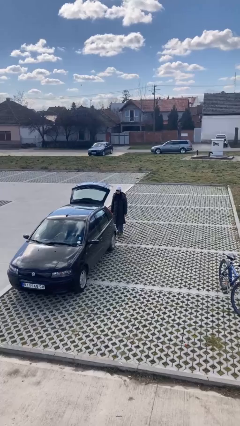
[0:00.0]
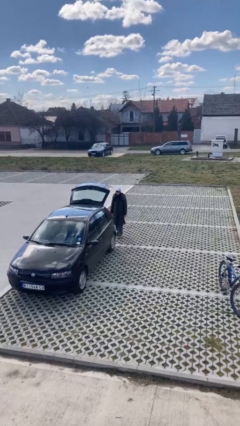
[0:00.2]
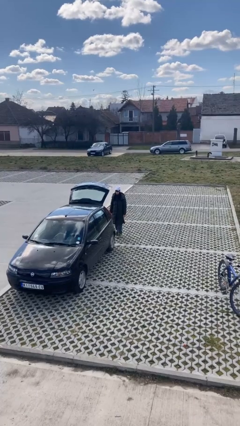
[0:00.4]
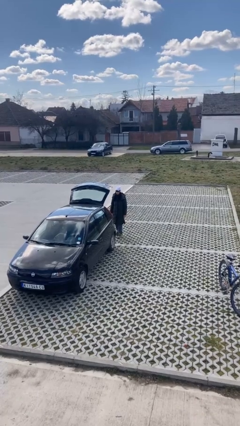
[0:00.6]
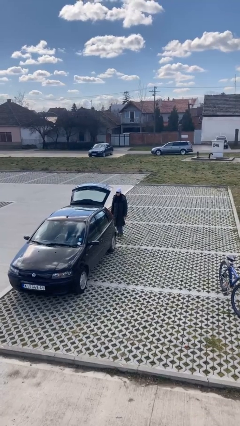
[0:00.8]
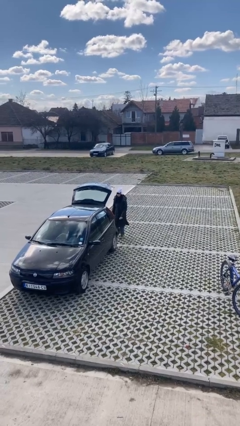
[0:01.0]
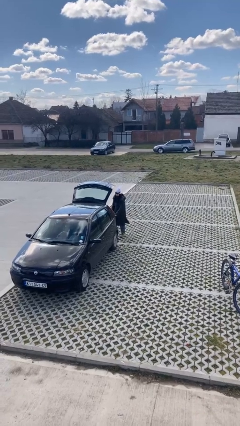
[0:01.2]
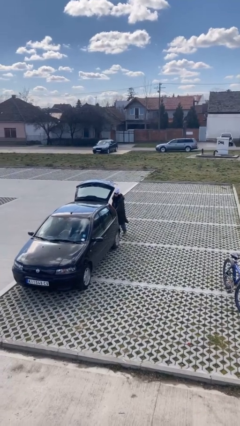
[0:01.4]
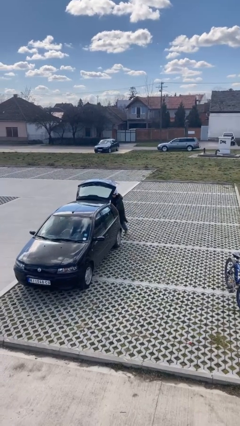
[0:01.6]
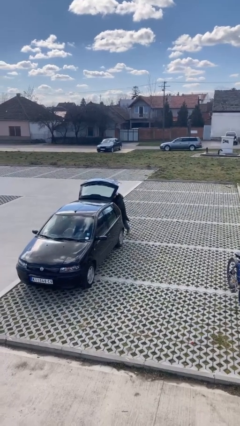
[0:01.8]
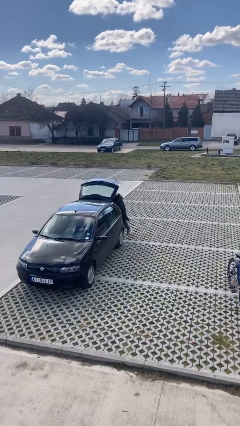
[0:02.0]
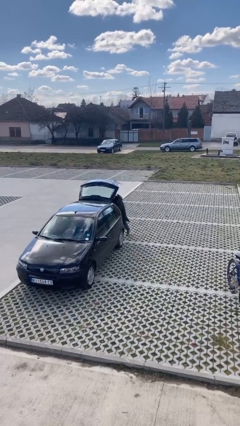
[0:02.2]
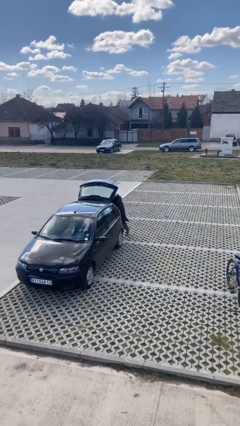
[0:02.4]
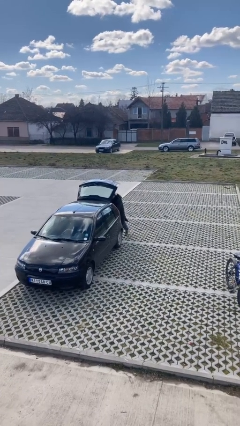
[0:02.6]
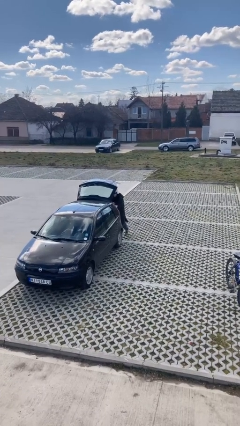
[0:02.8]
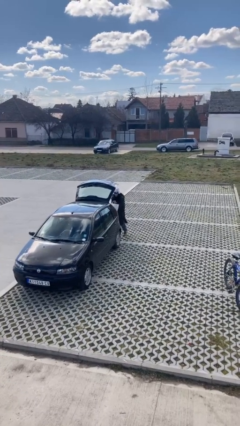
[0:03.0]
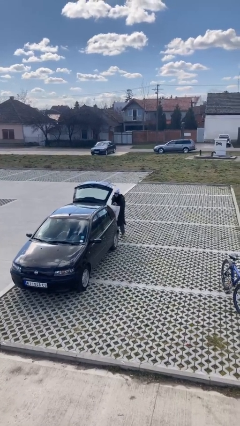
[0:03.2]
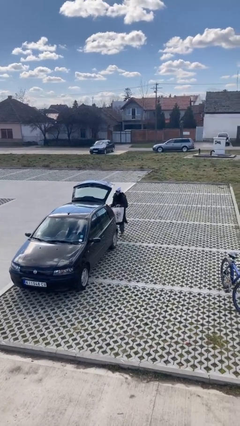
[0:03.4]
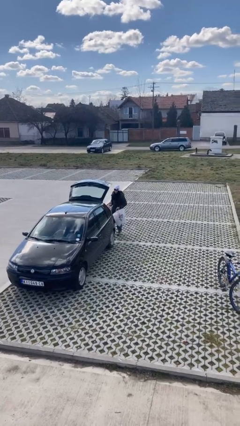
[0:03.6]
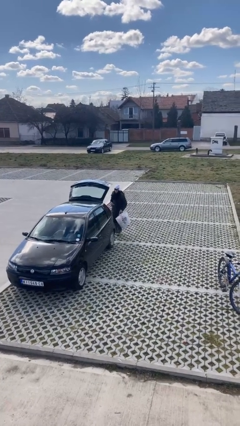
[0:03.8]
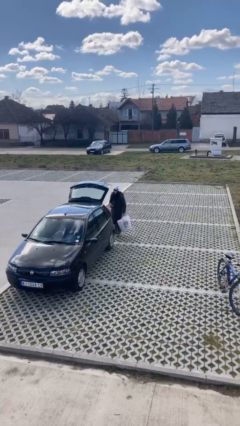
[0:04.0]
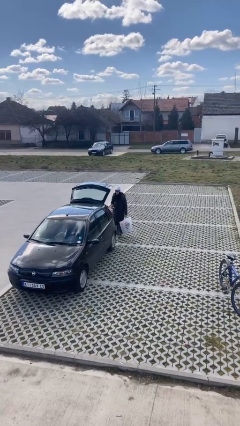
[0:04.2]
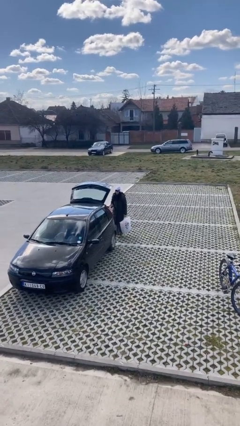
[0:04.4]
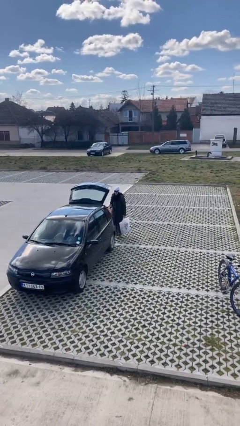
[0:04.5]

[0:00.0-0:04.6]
person unloads car

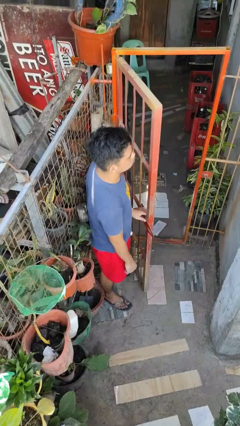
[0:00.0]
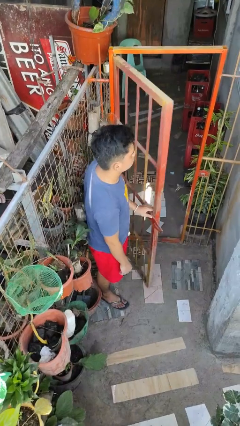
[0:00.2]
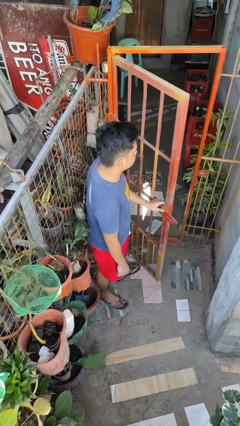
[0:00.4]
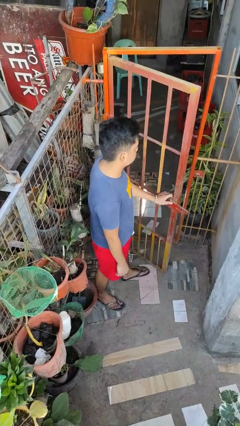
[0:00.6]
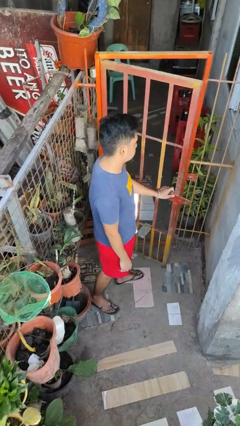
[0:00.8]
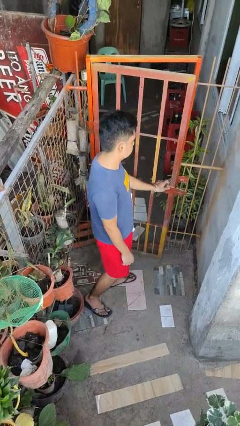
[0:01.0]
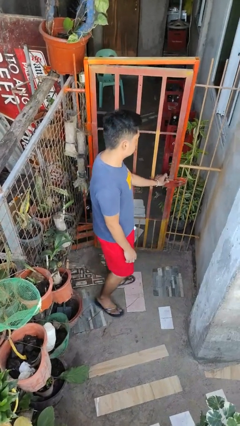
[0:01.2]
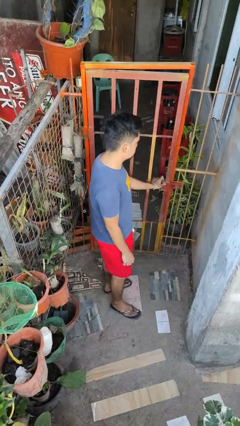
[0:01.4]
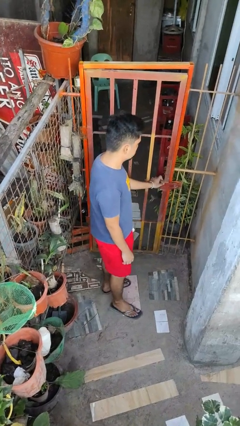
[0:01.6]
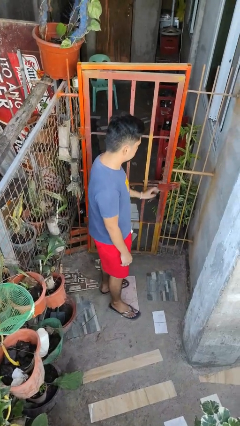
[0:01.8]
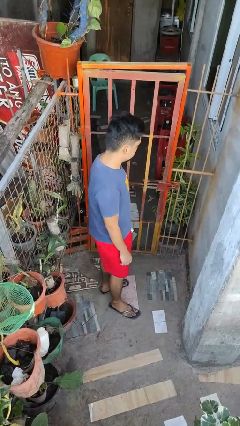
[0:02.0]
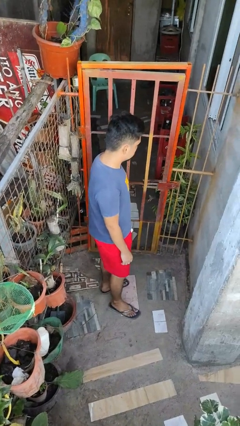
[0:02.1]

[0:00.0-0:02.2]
person closes gate

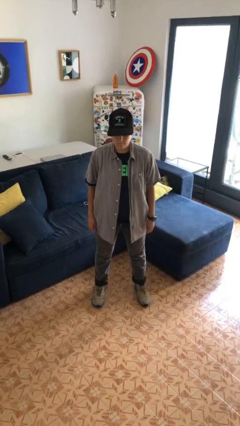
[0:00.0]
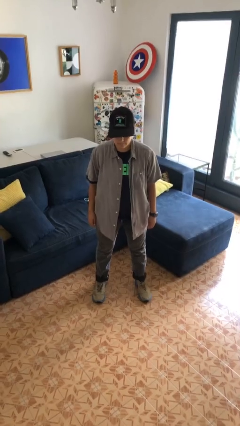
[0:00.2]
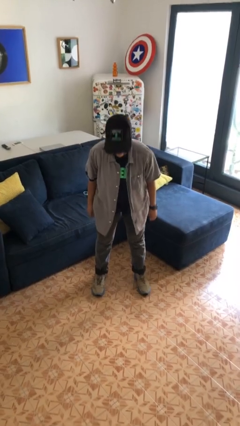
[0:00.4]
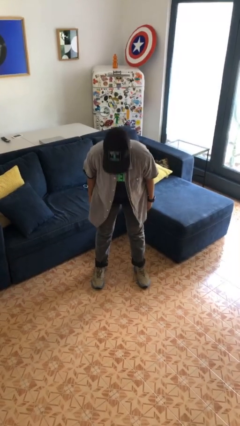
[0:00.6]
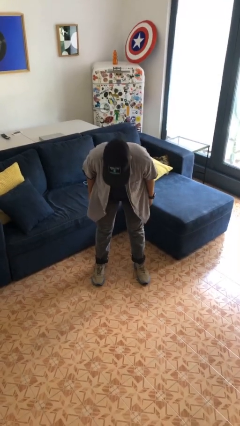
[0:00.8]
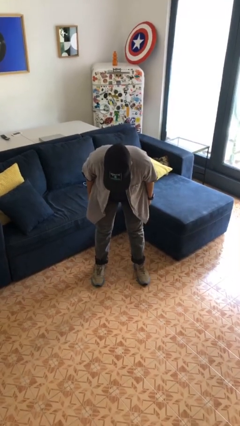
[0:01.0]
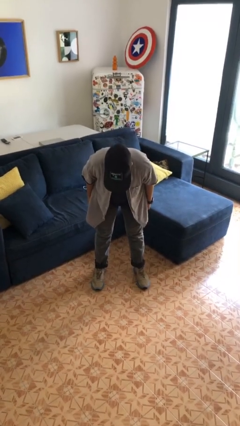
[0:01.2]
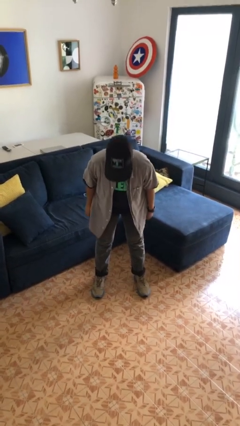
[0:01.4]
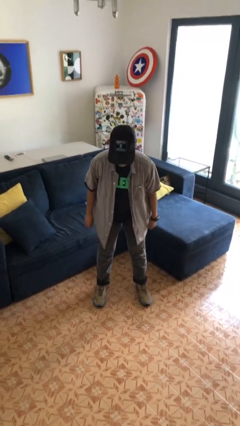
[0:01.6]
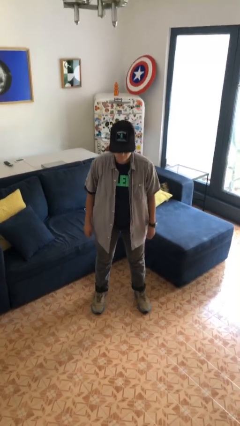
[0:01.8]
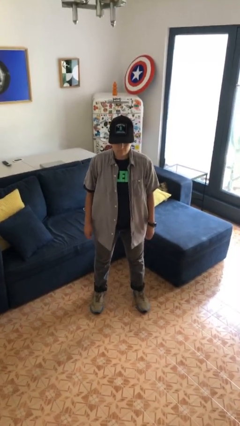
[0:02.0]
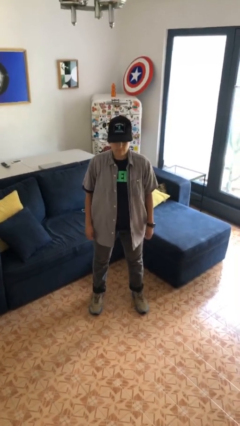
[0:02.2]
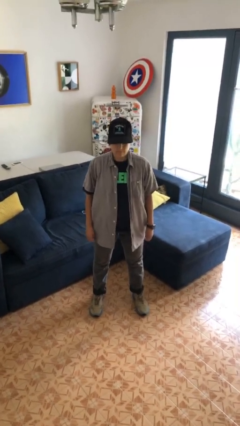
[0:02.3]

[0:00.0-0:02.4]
person bows

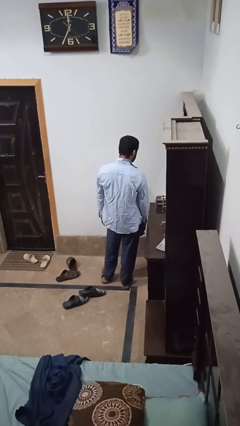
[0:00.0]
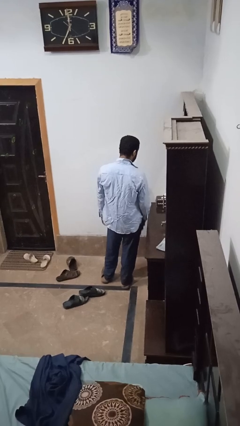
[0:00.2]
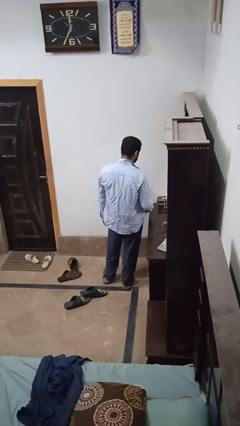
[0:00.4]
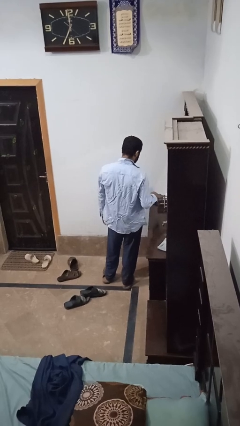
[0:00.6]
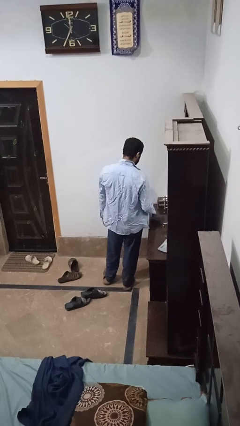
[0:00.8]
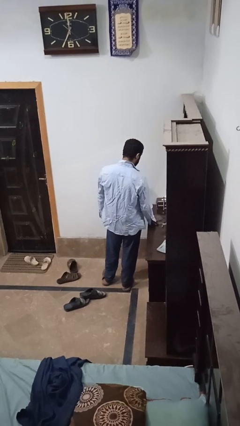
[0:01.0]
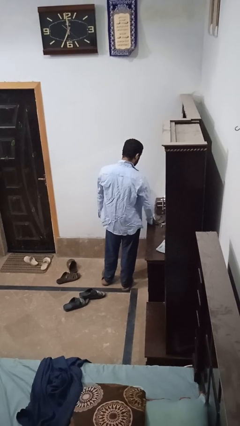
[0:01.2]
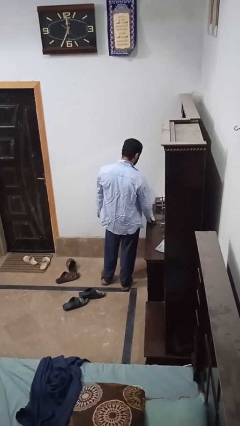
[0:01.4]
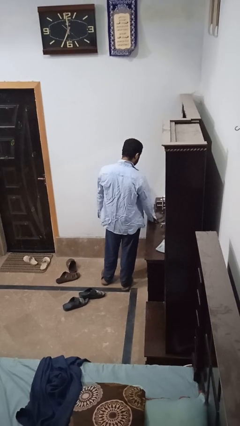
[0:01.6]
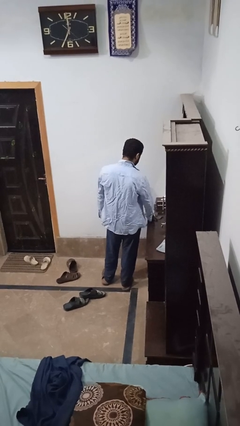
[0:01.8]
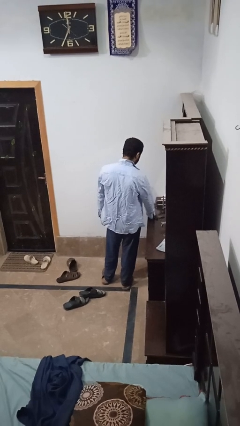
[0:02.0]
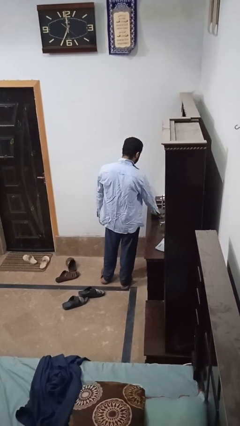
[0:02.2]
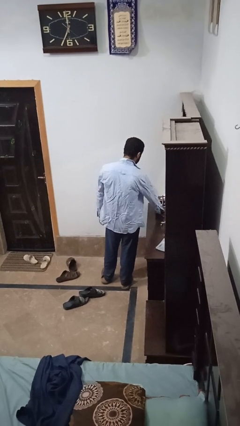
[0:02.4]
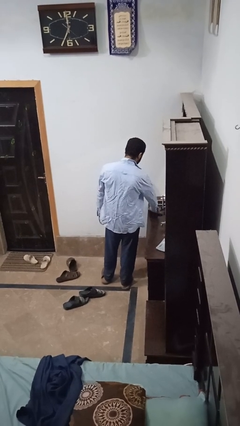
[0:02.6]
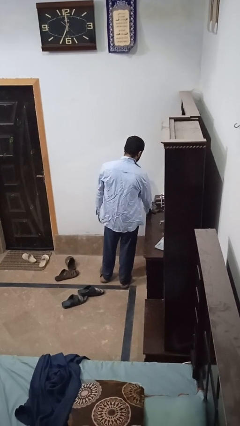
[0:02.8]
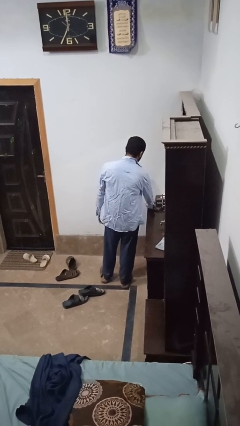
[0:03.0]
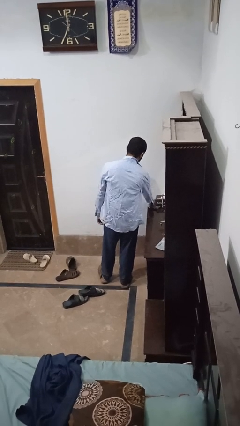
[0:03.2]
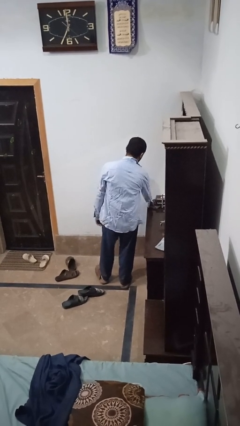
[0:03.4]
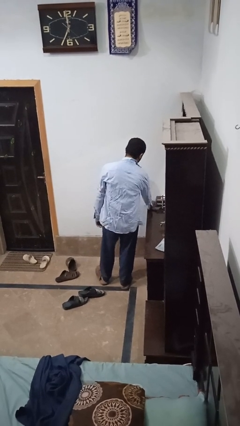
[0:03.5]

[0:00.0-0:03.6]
person cleans table with rag

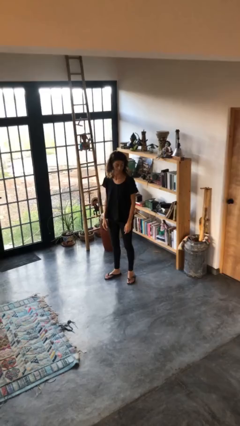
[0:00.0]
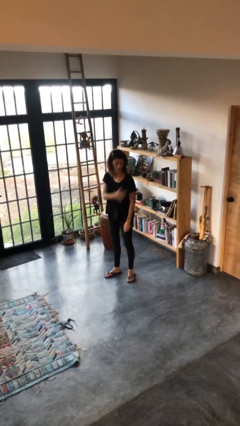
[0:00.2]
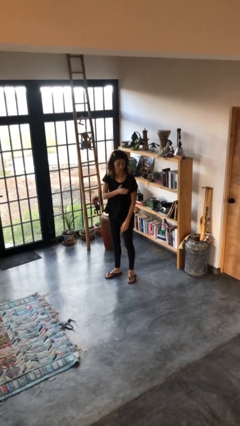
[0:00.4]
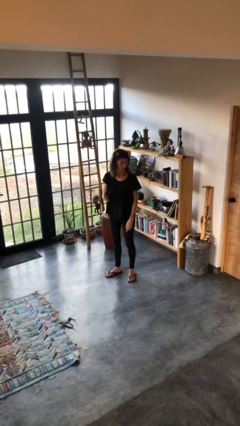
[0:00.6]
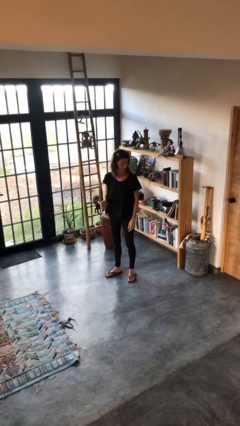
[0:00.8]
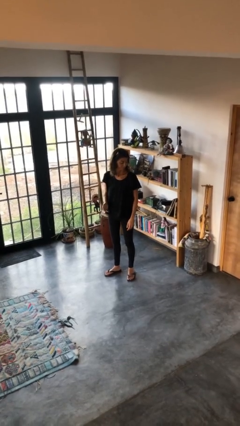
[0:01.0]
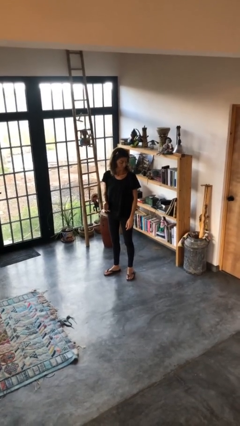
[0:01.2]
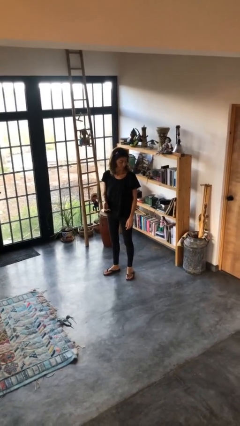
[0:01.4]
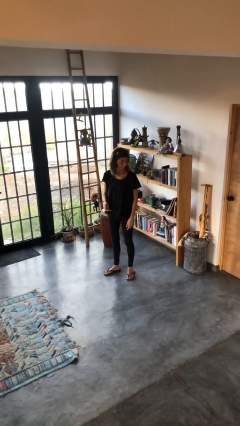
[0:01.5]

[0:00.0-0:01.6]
person swats bug

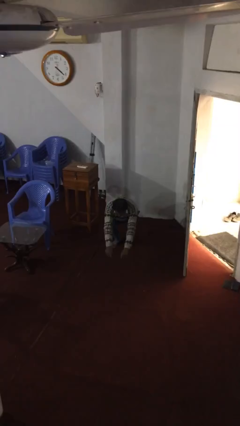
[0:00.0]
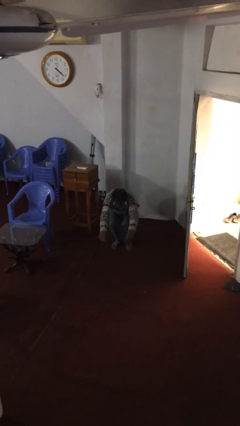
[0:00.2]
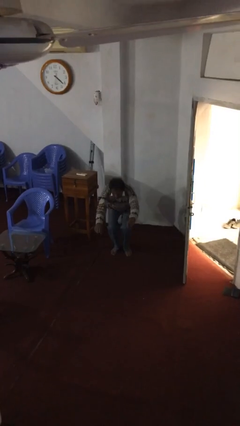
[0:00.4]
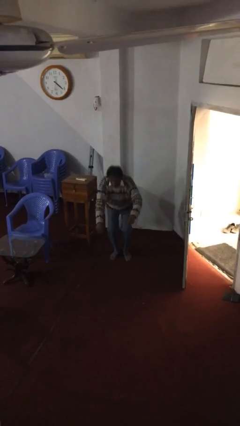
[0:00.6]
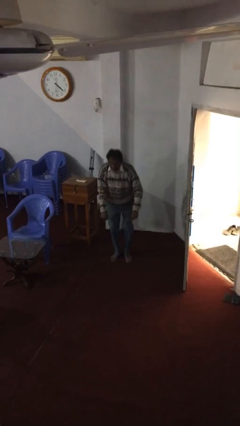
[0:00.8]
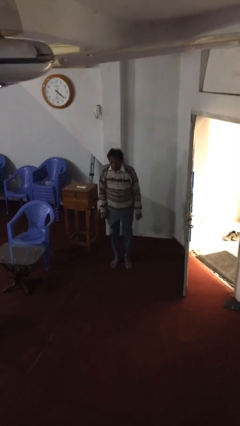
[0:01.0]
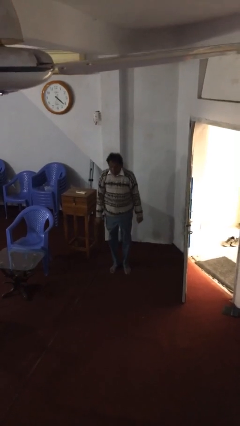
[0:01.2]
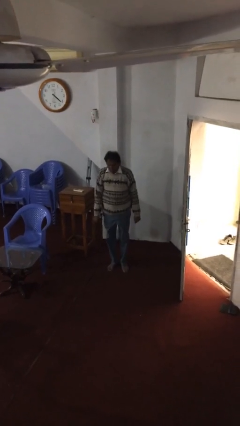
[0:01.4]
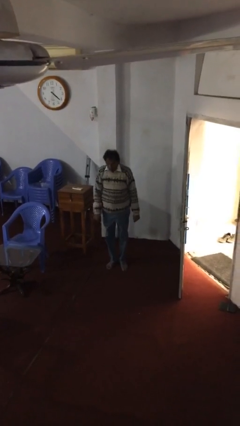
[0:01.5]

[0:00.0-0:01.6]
person stands up

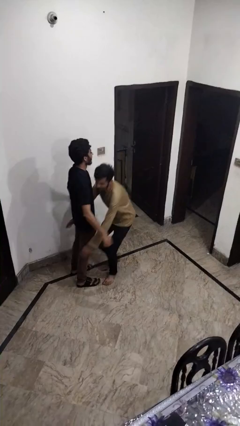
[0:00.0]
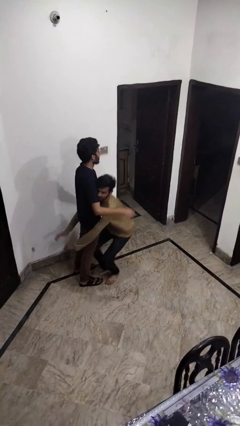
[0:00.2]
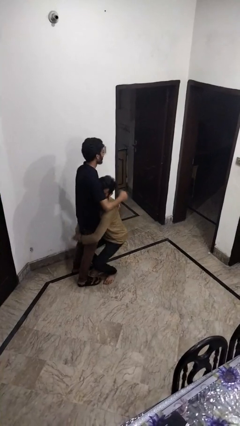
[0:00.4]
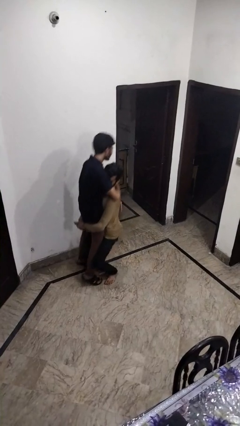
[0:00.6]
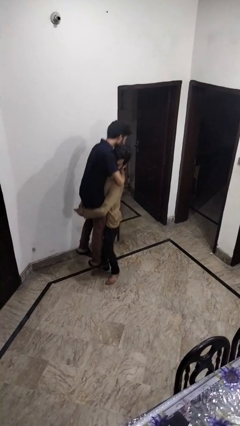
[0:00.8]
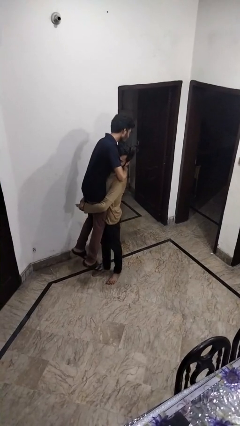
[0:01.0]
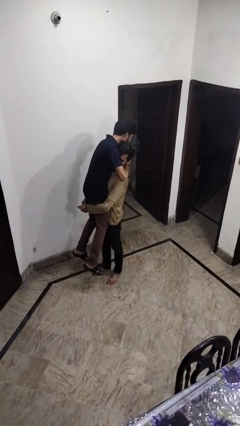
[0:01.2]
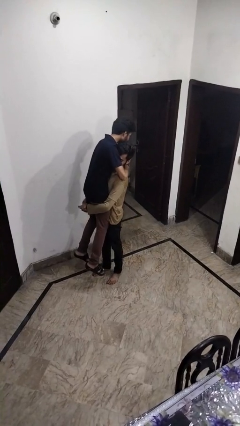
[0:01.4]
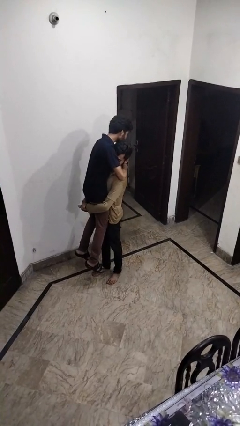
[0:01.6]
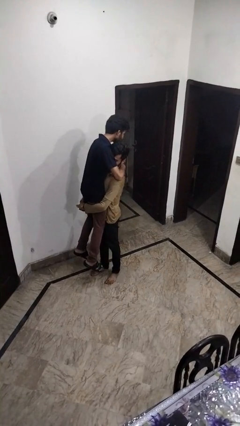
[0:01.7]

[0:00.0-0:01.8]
person picks up person
